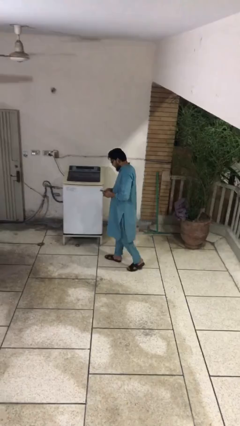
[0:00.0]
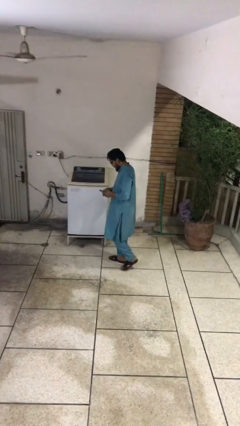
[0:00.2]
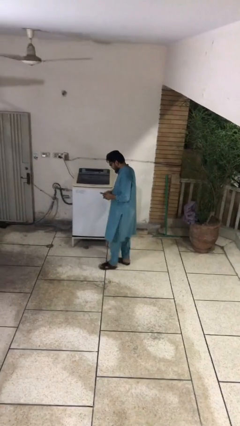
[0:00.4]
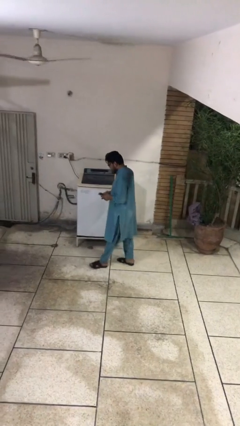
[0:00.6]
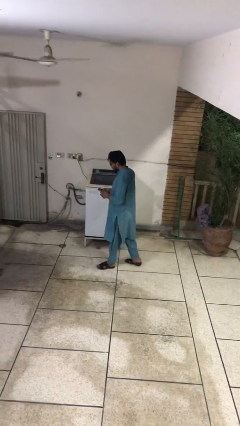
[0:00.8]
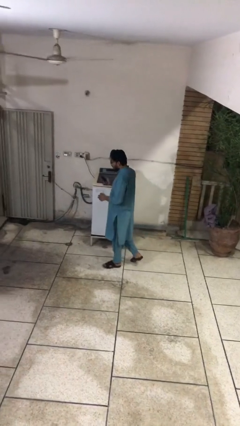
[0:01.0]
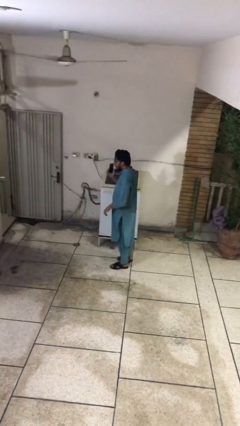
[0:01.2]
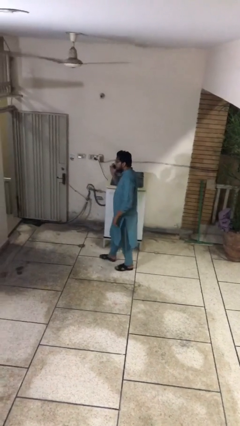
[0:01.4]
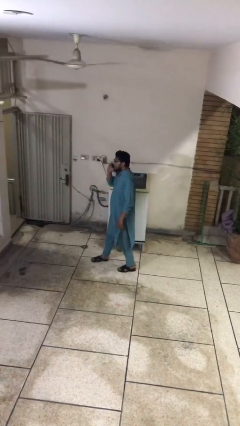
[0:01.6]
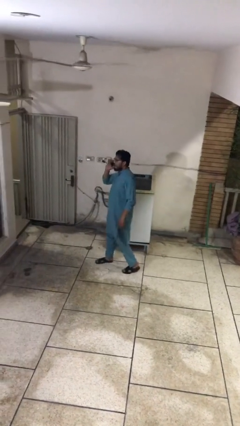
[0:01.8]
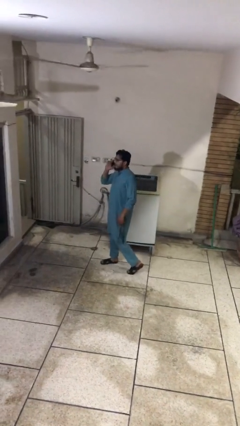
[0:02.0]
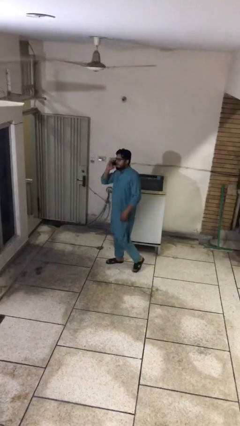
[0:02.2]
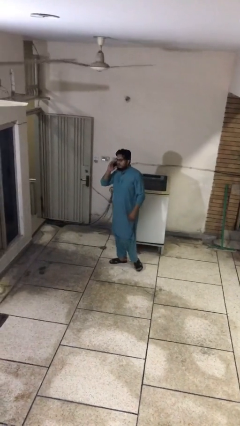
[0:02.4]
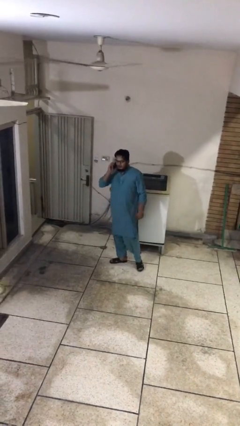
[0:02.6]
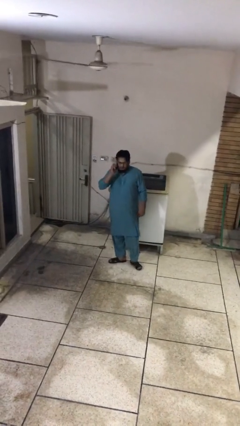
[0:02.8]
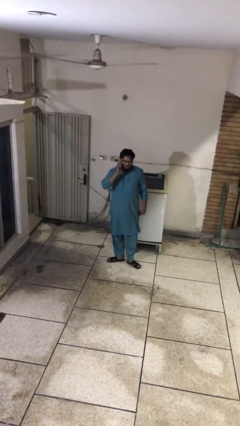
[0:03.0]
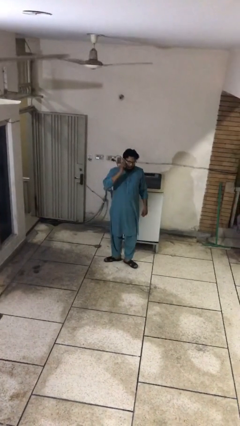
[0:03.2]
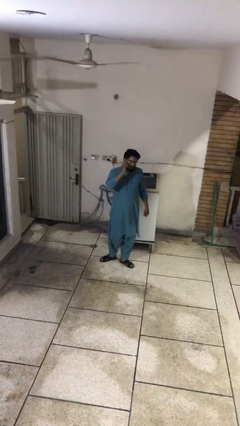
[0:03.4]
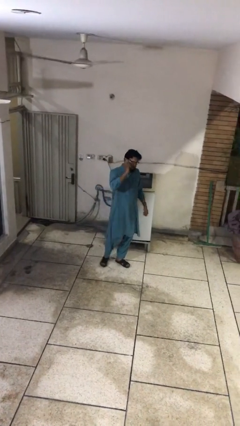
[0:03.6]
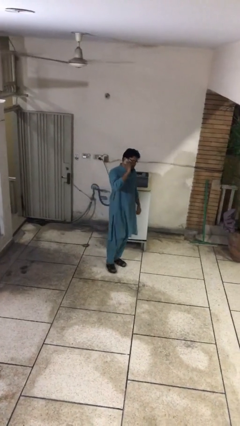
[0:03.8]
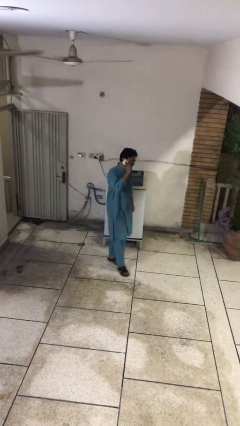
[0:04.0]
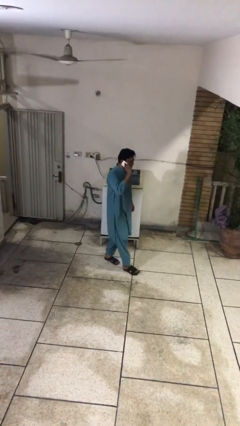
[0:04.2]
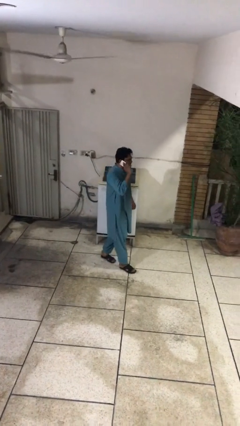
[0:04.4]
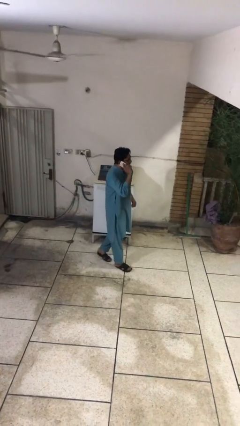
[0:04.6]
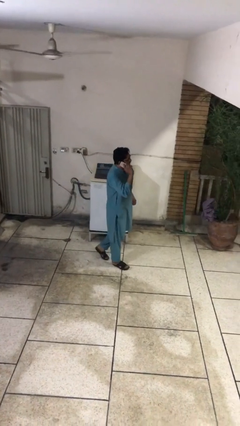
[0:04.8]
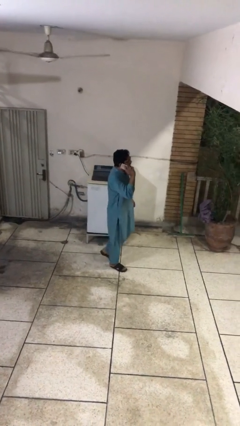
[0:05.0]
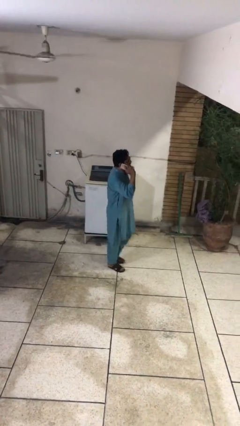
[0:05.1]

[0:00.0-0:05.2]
person talks on phone

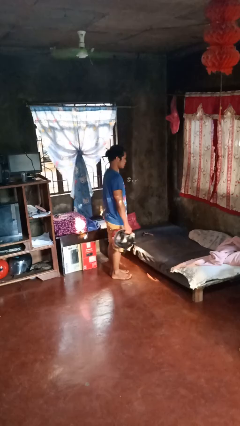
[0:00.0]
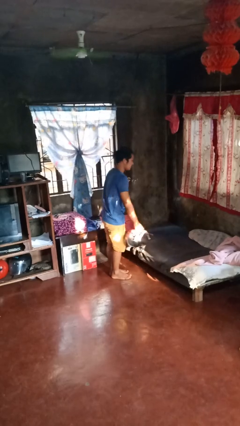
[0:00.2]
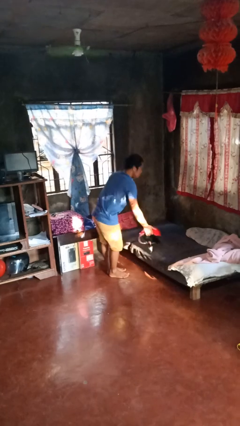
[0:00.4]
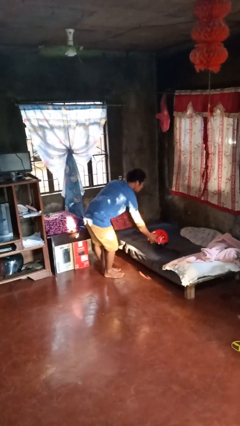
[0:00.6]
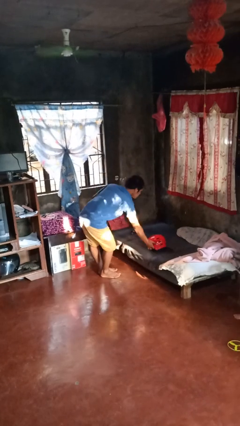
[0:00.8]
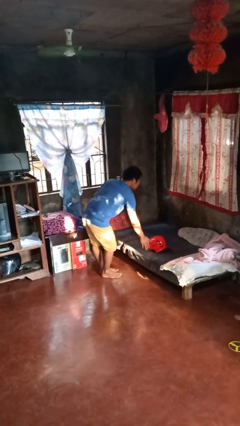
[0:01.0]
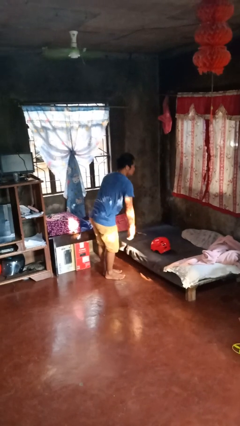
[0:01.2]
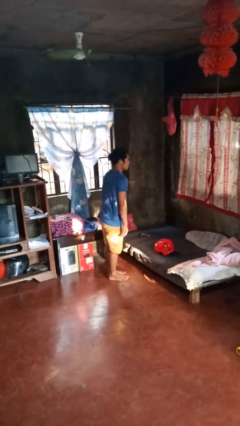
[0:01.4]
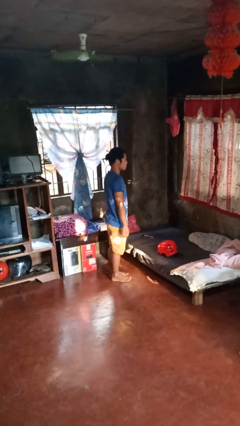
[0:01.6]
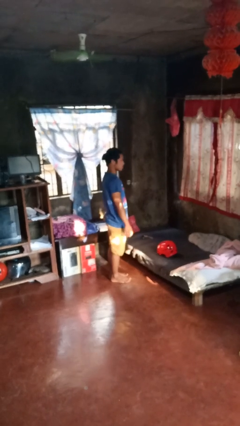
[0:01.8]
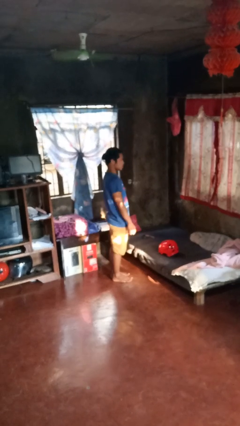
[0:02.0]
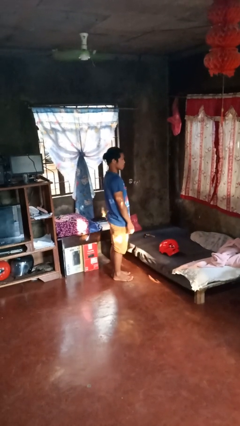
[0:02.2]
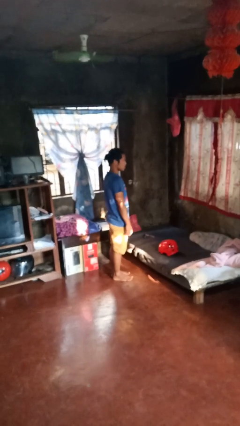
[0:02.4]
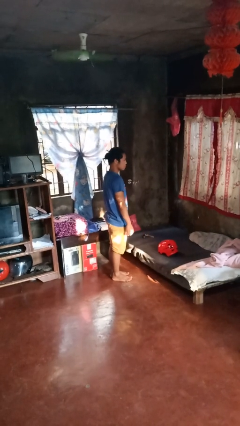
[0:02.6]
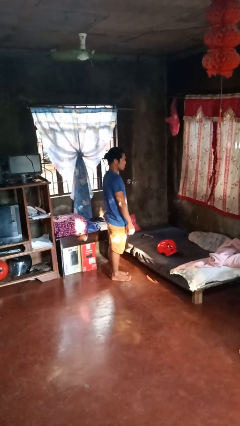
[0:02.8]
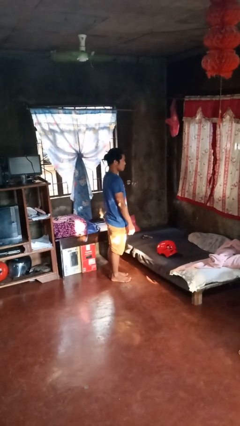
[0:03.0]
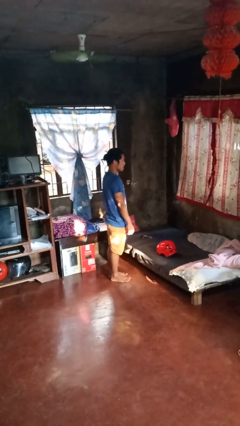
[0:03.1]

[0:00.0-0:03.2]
person puts down object on bed

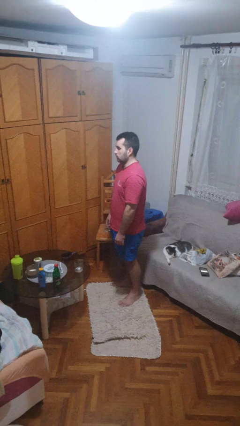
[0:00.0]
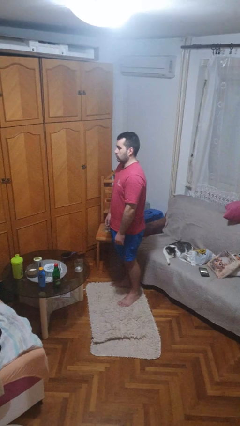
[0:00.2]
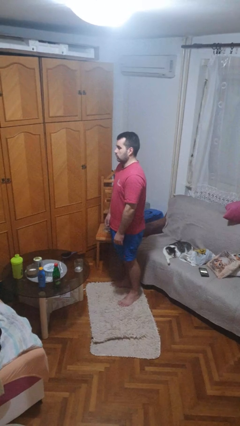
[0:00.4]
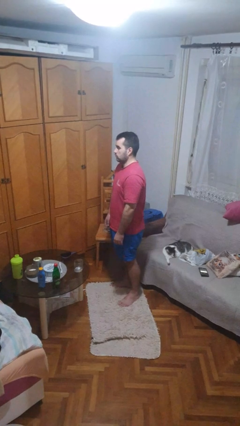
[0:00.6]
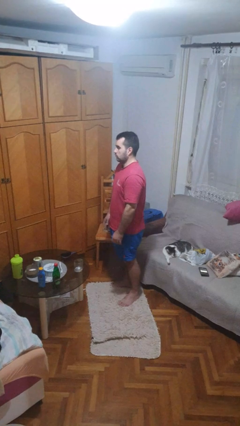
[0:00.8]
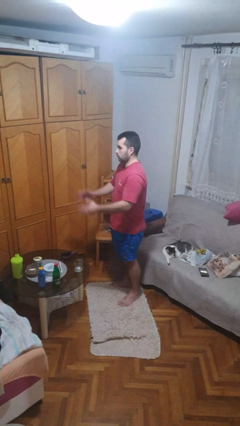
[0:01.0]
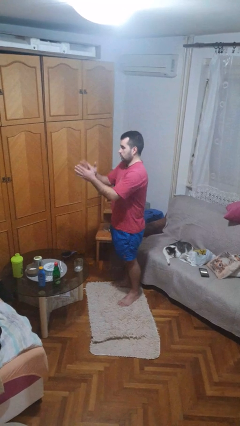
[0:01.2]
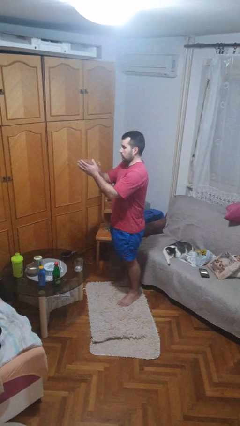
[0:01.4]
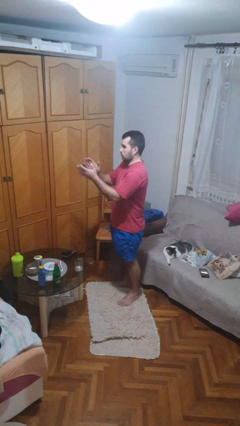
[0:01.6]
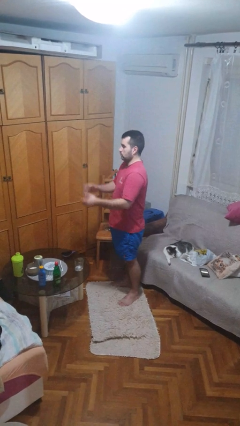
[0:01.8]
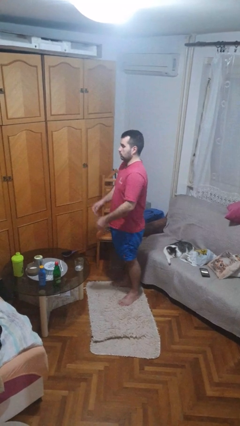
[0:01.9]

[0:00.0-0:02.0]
person claps hands

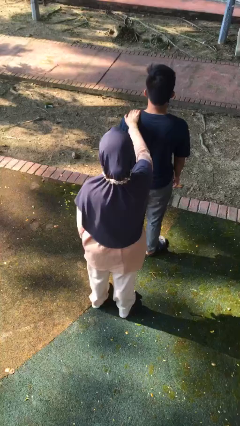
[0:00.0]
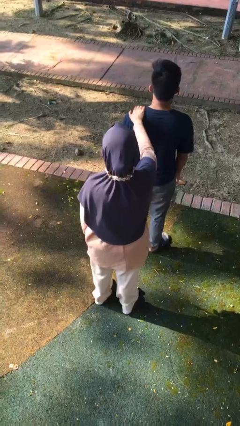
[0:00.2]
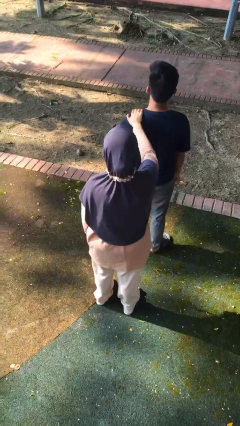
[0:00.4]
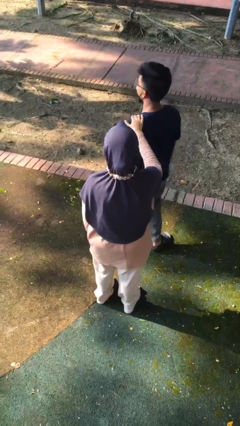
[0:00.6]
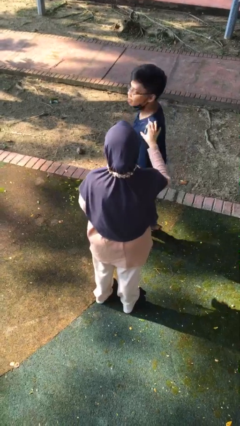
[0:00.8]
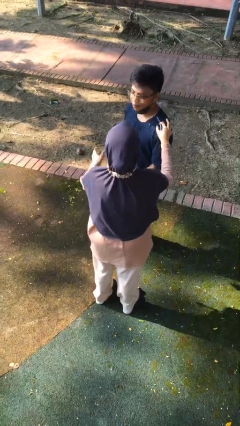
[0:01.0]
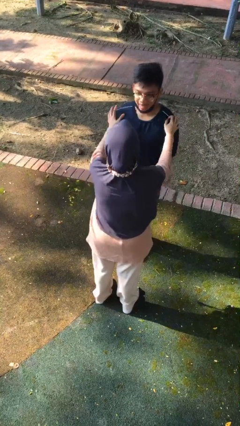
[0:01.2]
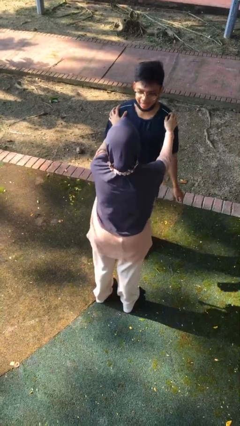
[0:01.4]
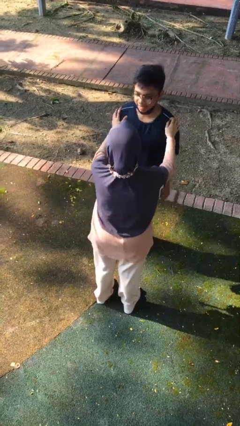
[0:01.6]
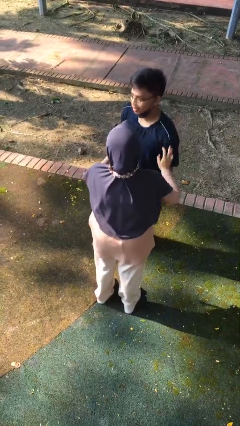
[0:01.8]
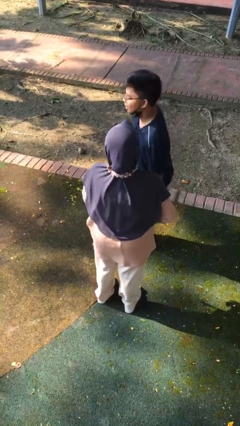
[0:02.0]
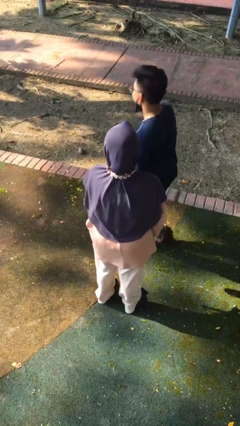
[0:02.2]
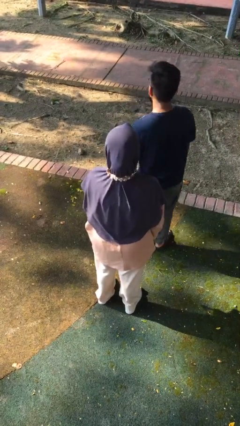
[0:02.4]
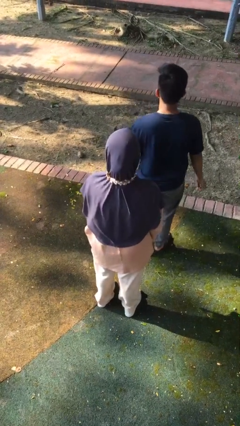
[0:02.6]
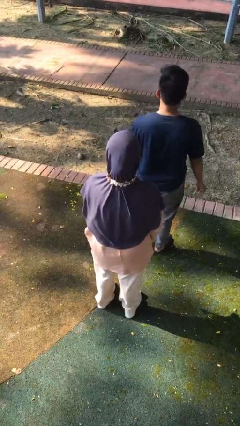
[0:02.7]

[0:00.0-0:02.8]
person spins person around

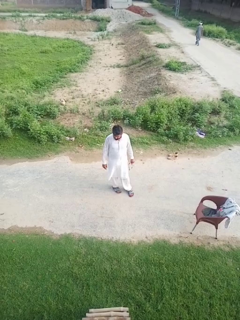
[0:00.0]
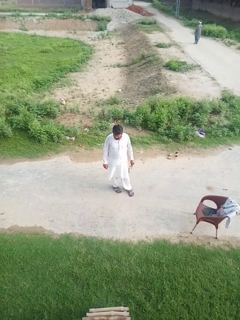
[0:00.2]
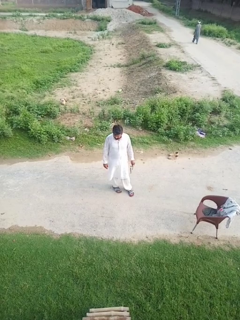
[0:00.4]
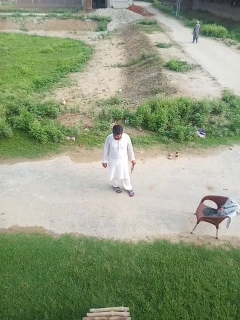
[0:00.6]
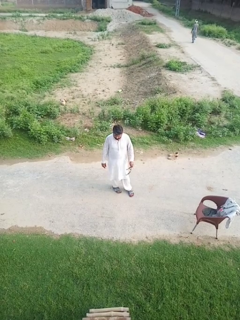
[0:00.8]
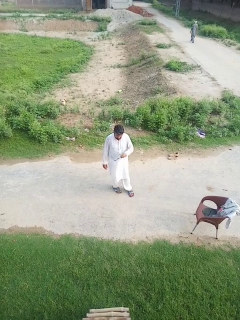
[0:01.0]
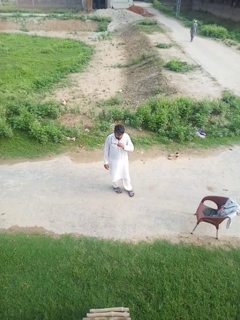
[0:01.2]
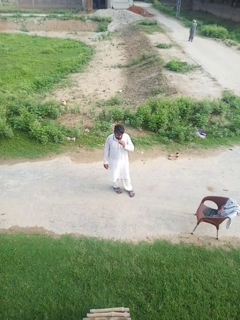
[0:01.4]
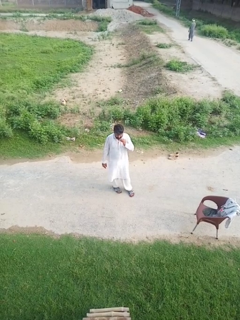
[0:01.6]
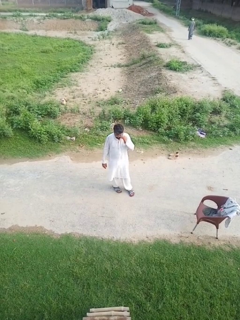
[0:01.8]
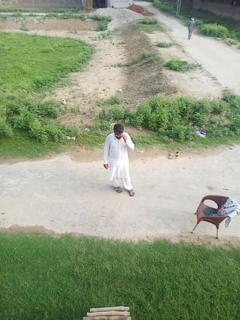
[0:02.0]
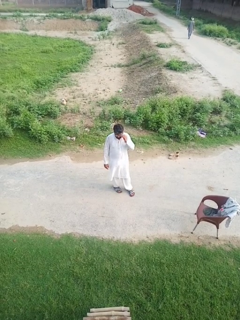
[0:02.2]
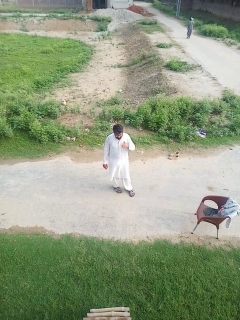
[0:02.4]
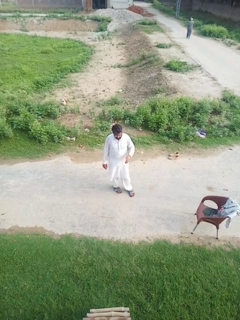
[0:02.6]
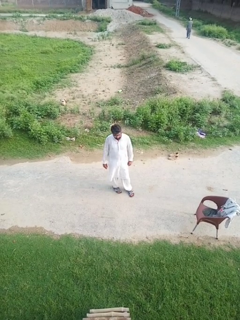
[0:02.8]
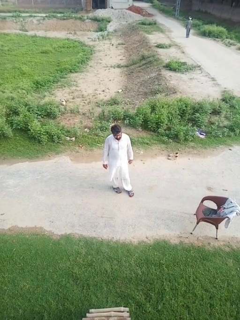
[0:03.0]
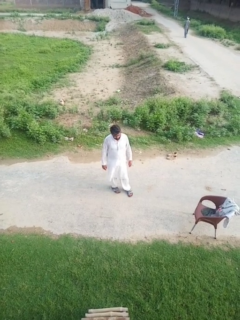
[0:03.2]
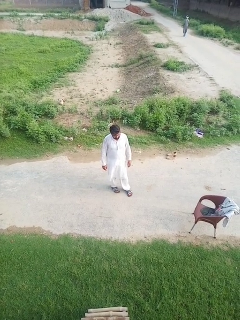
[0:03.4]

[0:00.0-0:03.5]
person puts on glasses

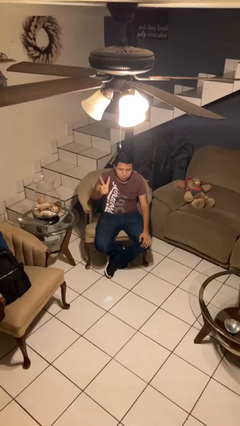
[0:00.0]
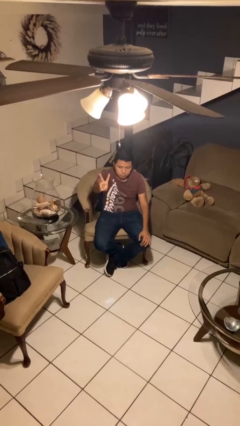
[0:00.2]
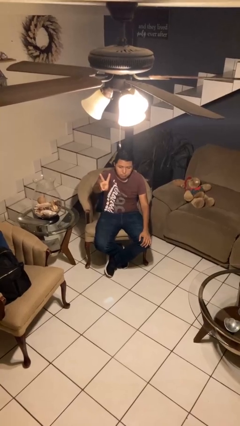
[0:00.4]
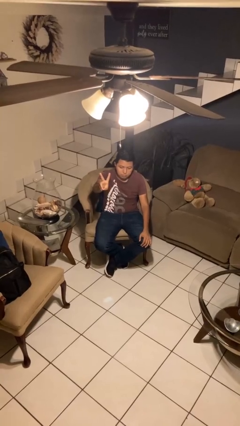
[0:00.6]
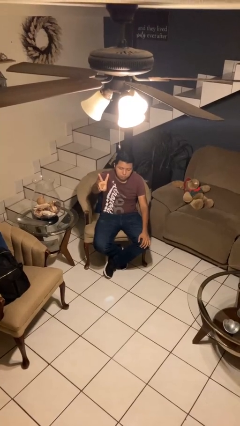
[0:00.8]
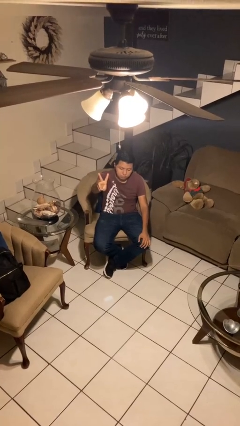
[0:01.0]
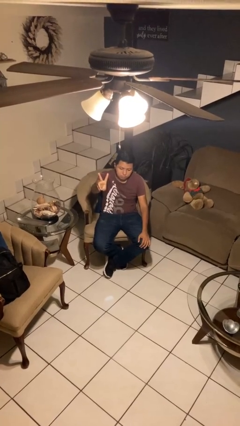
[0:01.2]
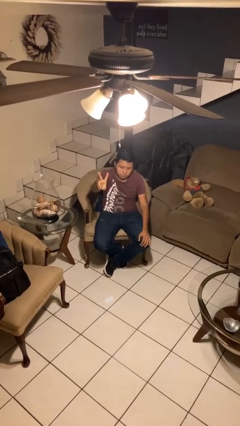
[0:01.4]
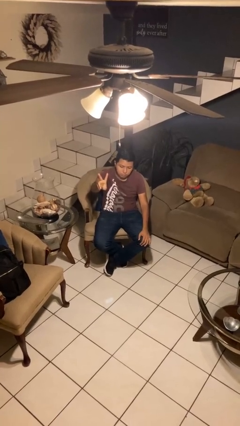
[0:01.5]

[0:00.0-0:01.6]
person gestures peace
